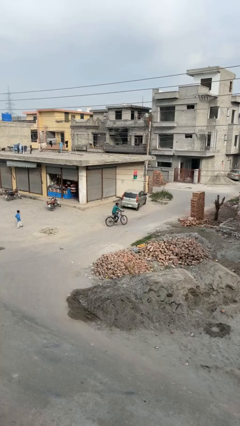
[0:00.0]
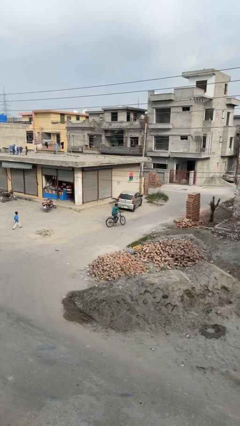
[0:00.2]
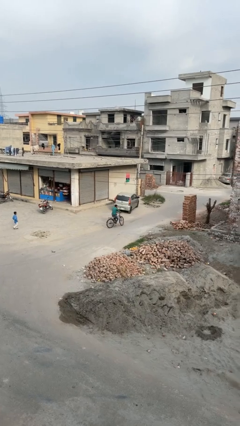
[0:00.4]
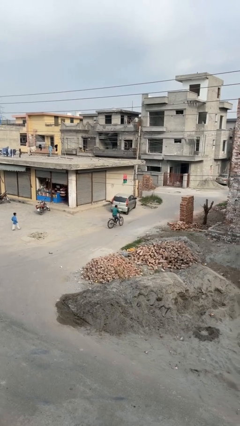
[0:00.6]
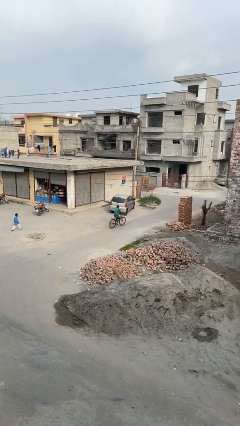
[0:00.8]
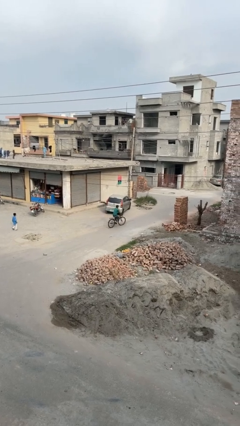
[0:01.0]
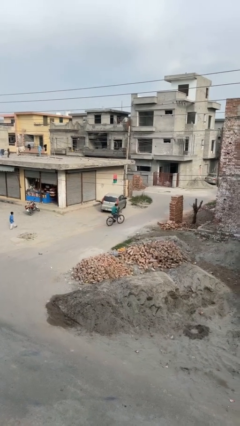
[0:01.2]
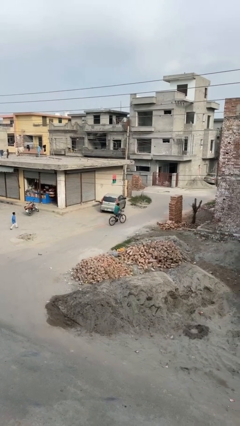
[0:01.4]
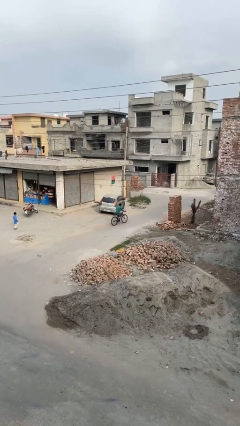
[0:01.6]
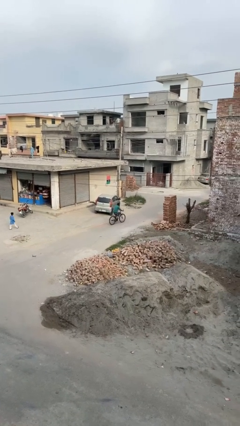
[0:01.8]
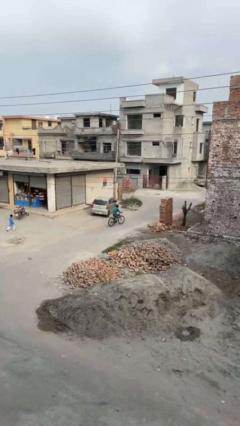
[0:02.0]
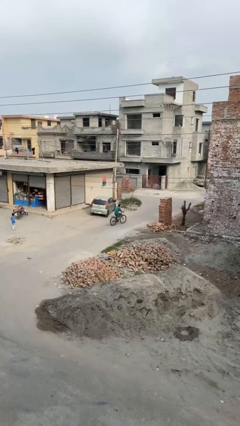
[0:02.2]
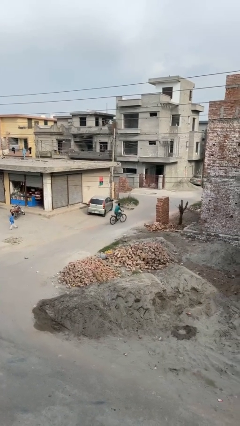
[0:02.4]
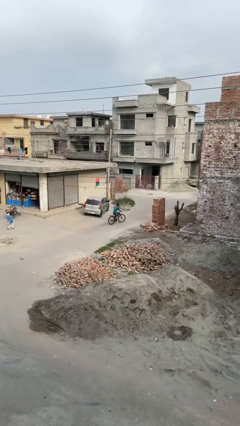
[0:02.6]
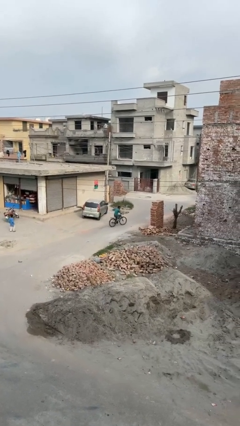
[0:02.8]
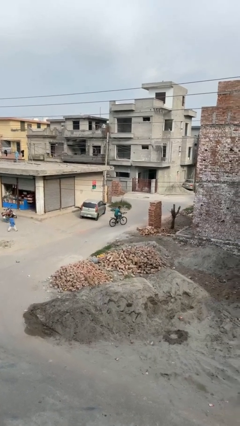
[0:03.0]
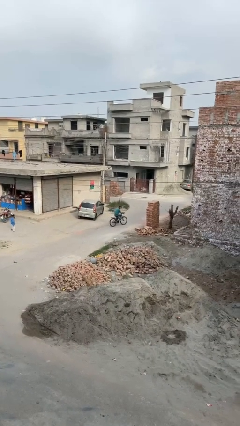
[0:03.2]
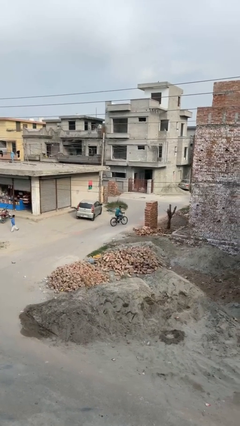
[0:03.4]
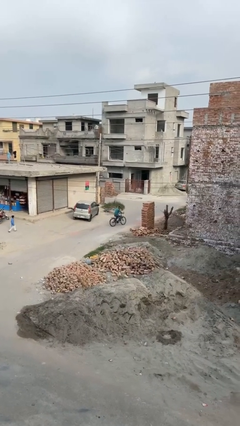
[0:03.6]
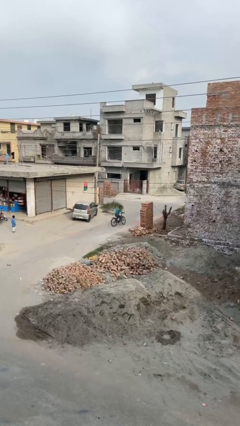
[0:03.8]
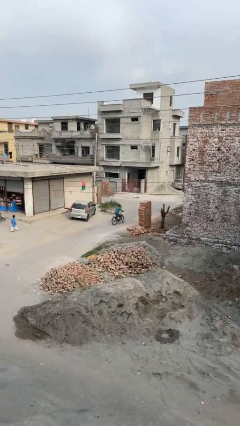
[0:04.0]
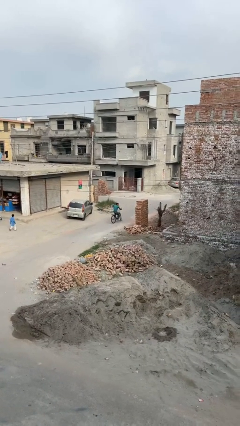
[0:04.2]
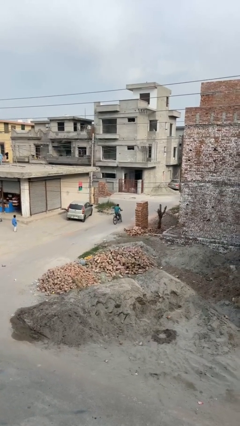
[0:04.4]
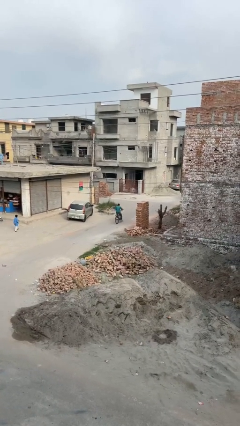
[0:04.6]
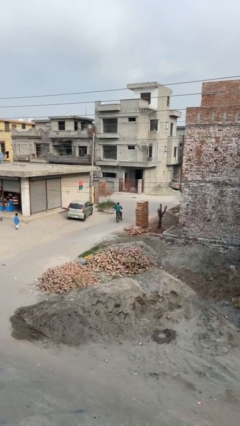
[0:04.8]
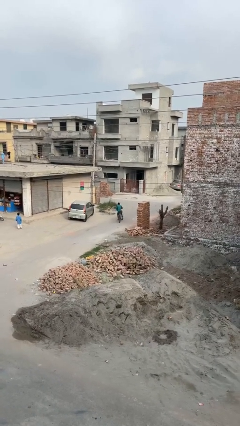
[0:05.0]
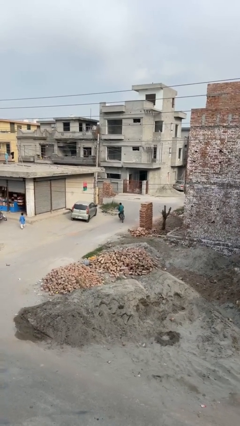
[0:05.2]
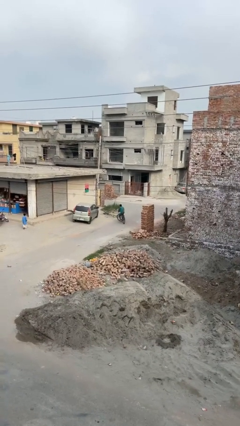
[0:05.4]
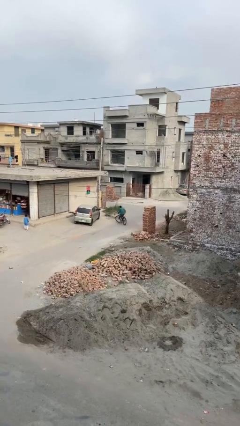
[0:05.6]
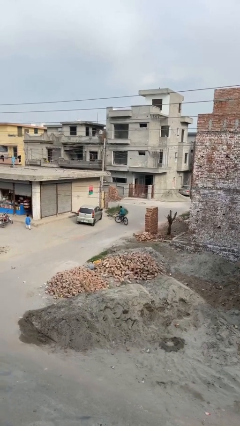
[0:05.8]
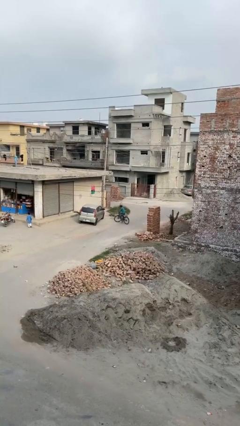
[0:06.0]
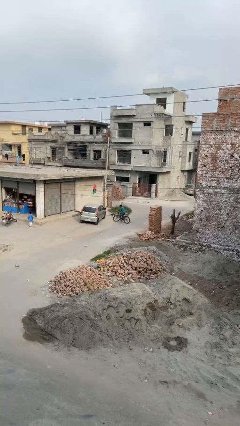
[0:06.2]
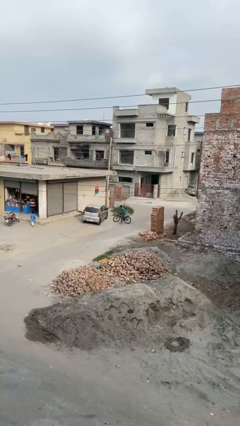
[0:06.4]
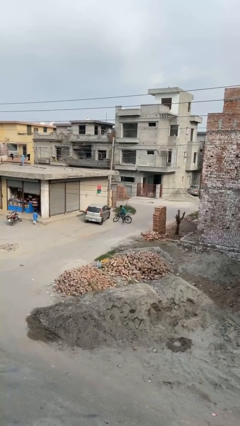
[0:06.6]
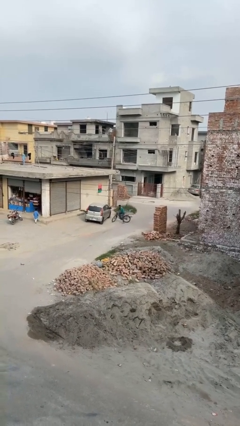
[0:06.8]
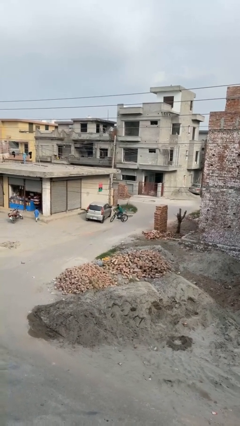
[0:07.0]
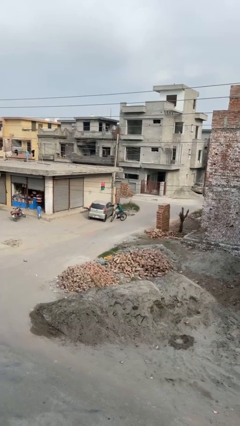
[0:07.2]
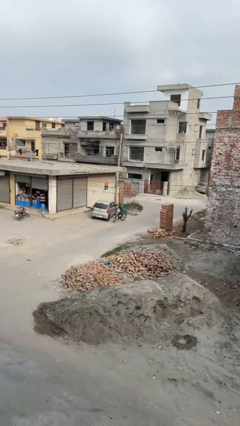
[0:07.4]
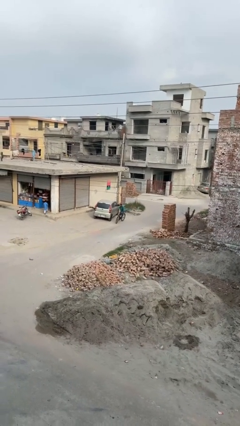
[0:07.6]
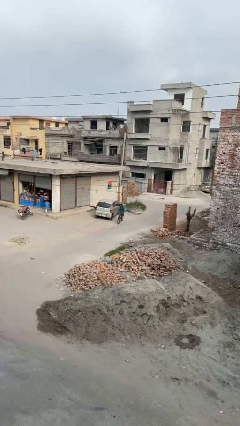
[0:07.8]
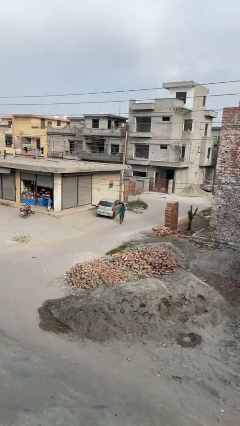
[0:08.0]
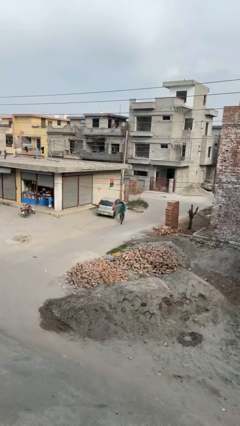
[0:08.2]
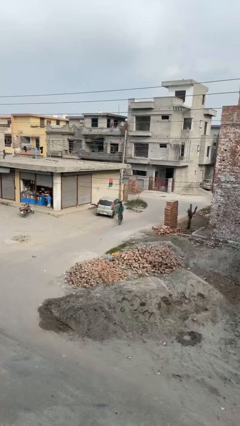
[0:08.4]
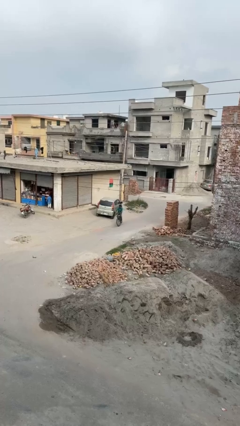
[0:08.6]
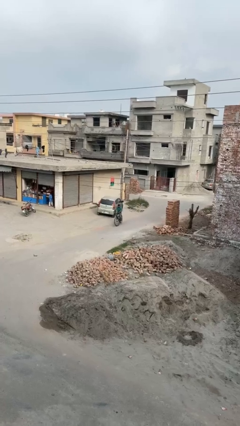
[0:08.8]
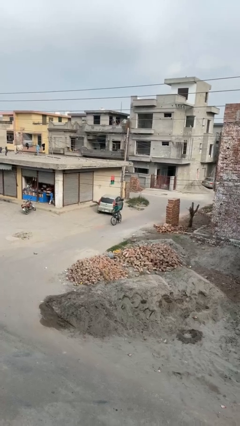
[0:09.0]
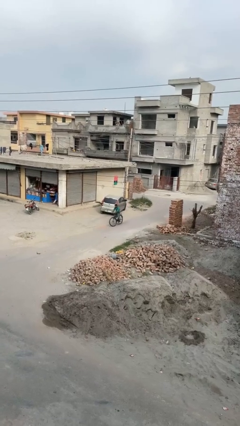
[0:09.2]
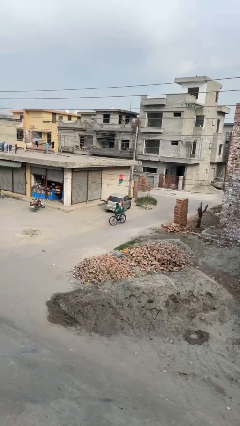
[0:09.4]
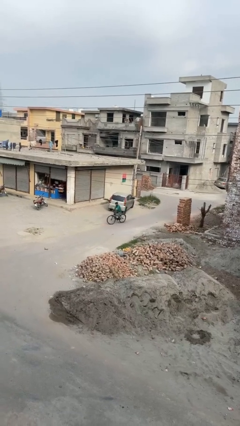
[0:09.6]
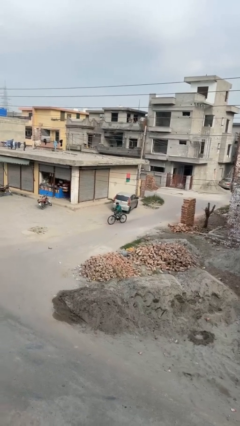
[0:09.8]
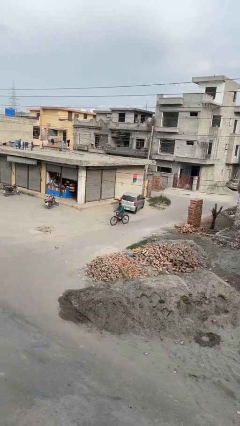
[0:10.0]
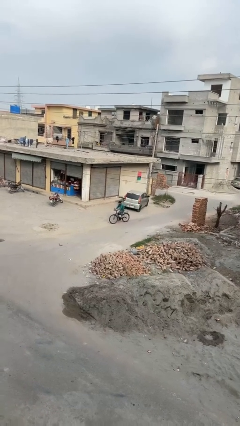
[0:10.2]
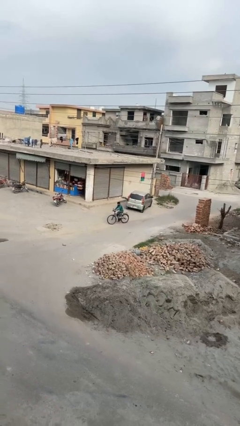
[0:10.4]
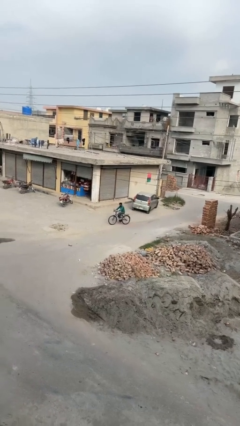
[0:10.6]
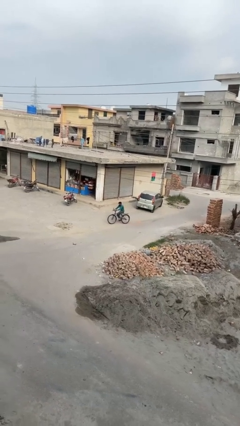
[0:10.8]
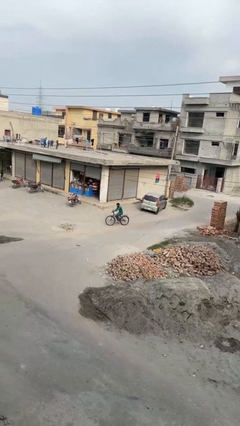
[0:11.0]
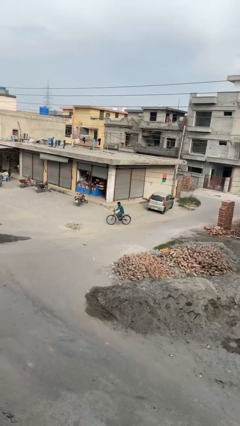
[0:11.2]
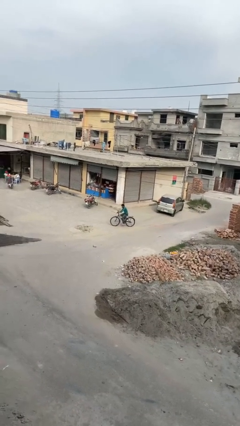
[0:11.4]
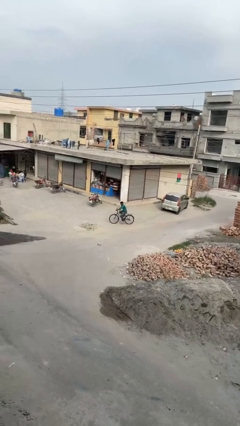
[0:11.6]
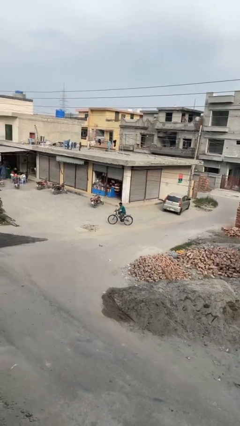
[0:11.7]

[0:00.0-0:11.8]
person rides bicycle

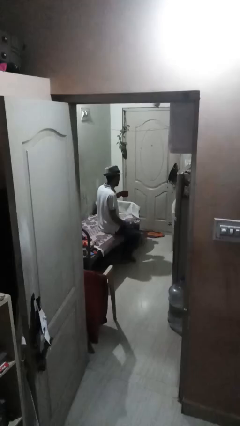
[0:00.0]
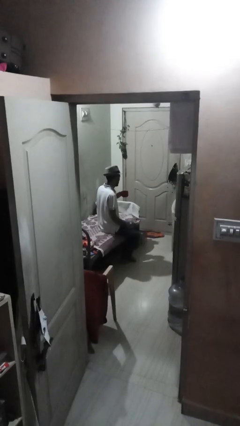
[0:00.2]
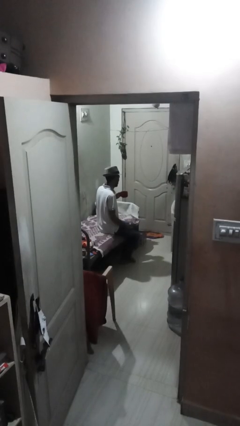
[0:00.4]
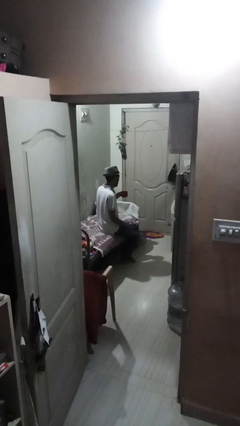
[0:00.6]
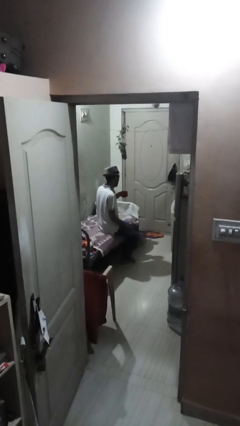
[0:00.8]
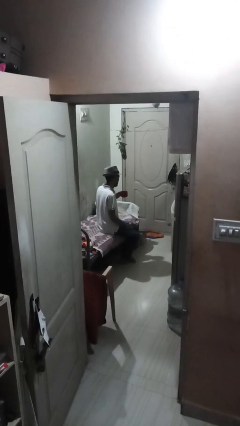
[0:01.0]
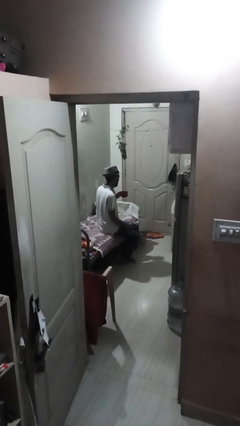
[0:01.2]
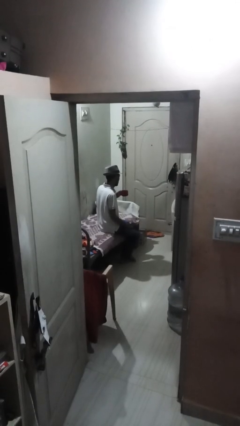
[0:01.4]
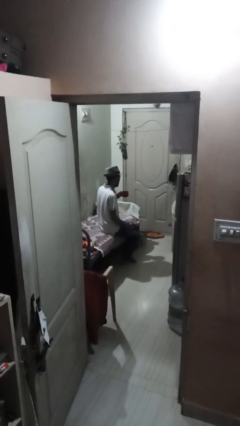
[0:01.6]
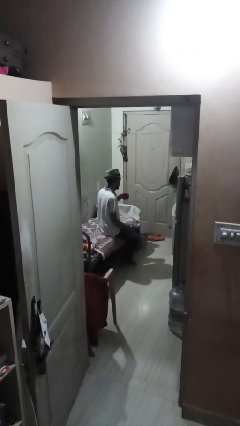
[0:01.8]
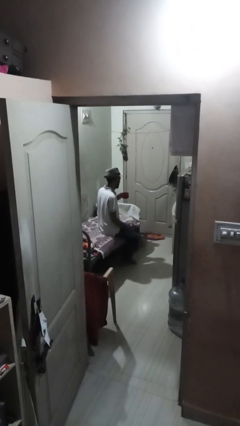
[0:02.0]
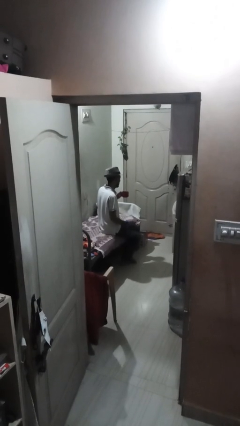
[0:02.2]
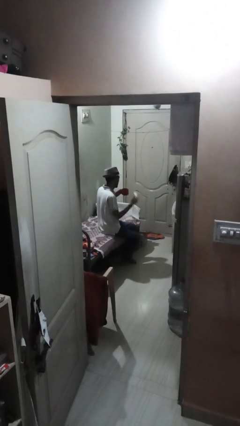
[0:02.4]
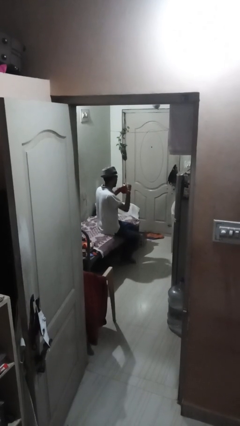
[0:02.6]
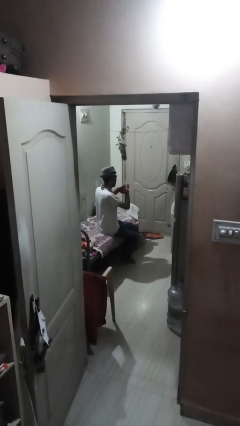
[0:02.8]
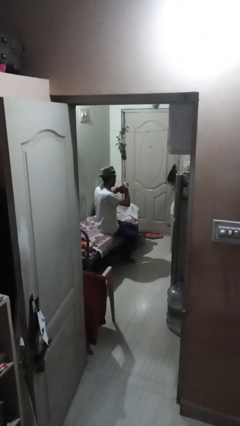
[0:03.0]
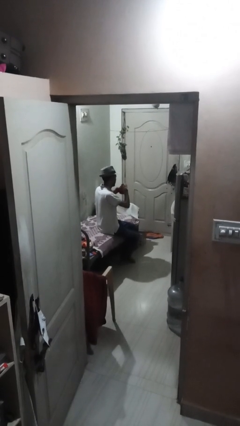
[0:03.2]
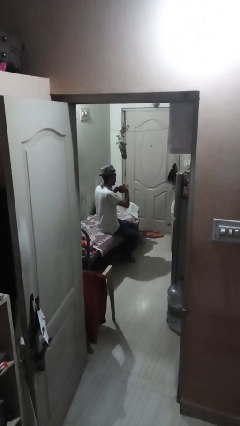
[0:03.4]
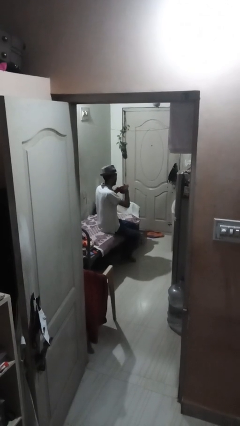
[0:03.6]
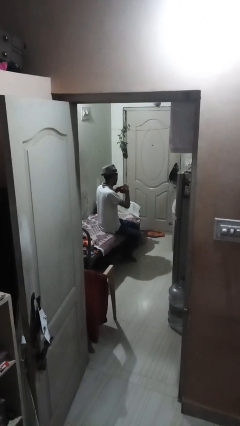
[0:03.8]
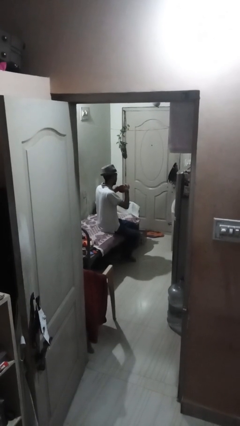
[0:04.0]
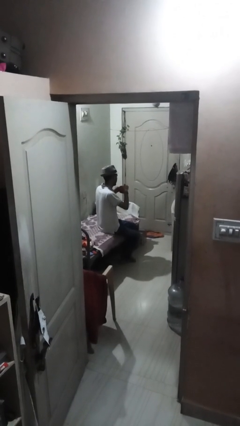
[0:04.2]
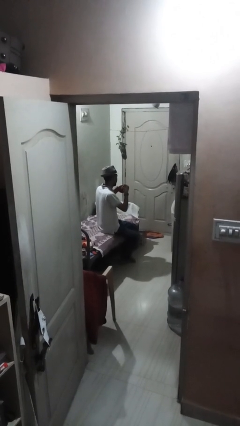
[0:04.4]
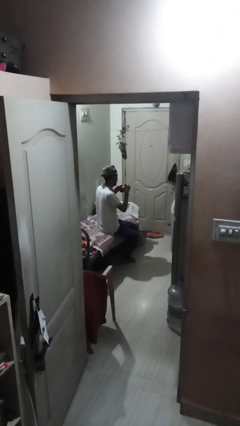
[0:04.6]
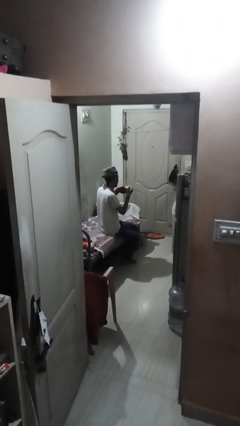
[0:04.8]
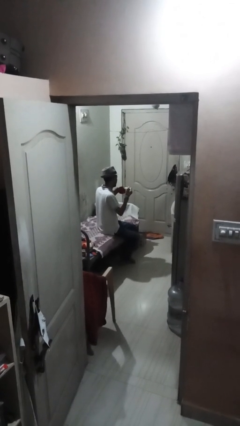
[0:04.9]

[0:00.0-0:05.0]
person stirs mug

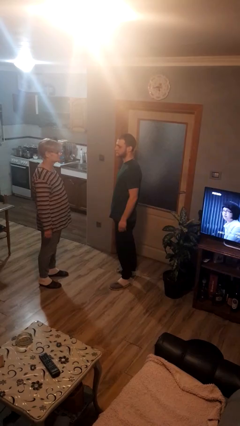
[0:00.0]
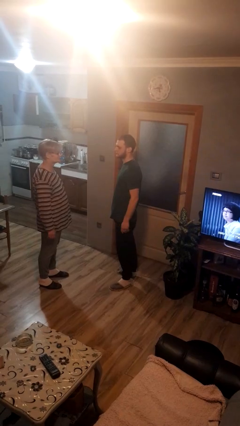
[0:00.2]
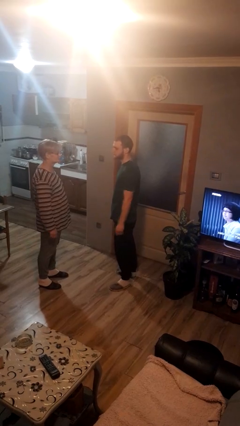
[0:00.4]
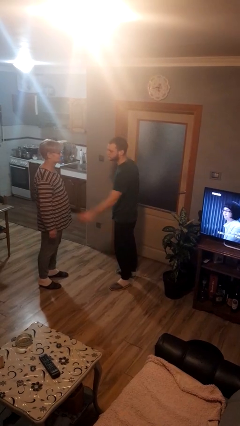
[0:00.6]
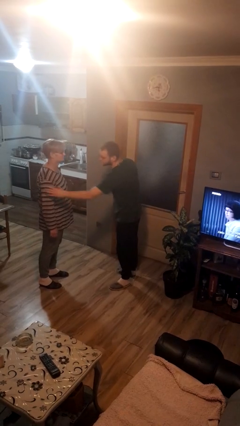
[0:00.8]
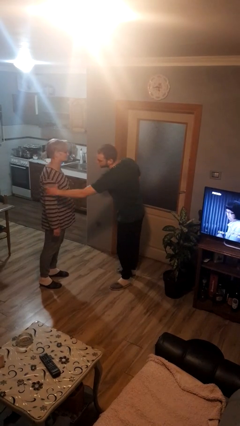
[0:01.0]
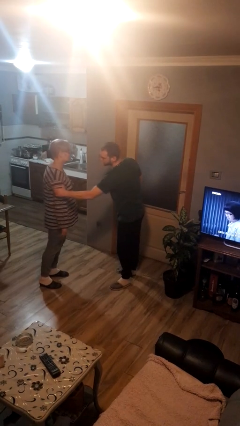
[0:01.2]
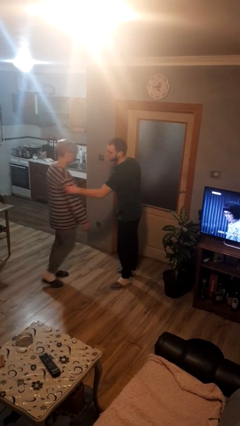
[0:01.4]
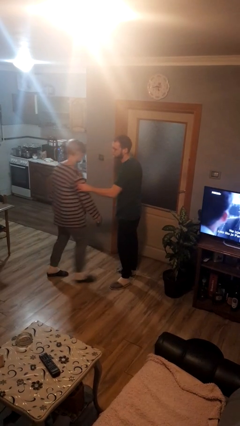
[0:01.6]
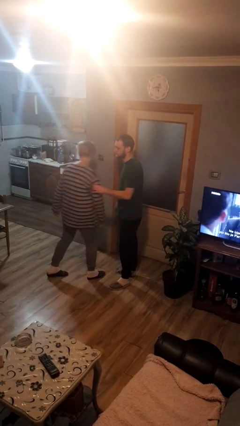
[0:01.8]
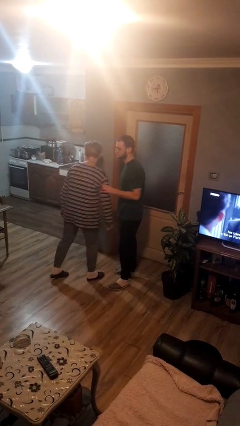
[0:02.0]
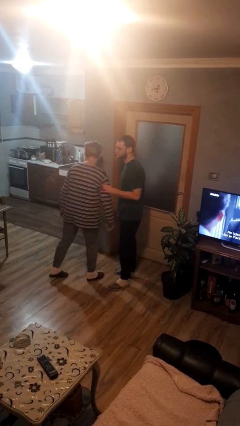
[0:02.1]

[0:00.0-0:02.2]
person grabs person by bicep
